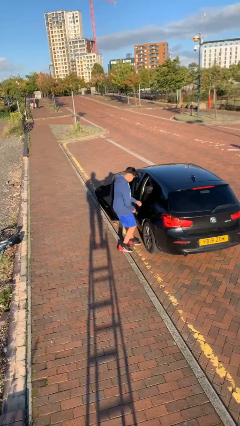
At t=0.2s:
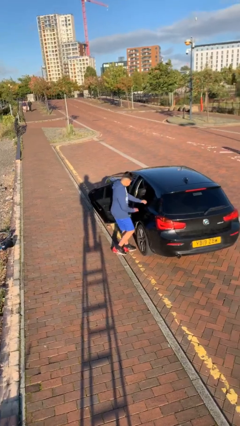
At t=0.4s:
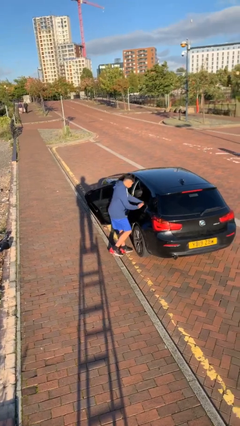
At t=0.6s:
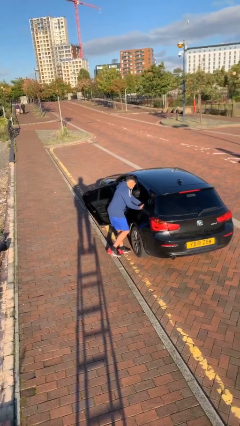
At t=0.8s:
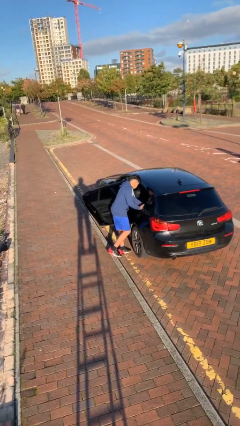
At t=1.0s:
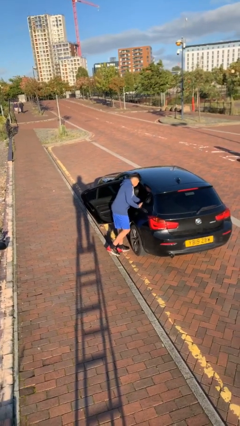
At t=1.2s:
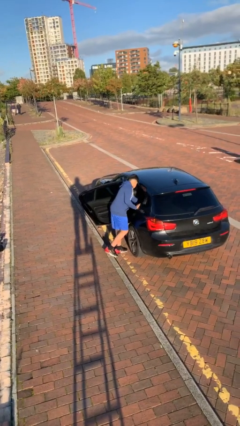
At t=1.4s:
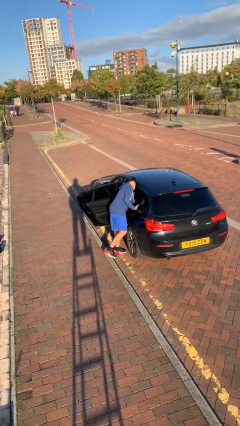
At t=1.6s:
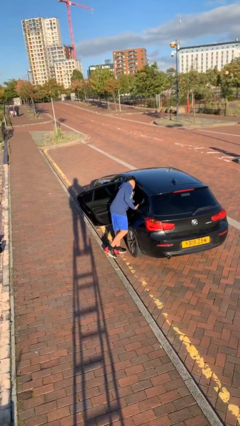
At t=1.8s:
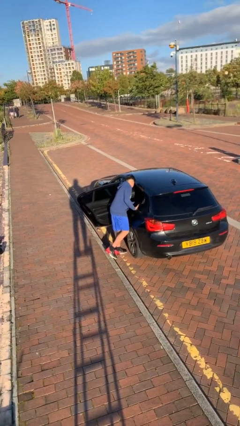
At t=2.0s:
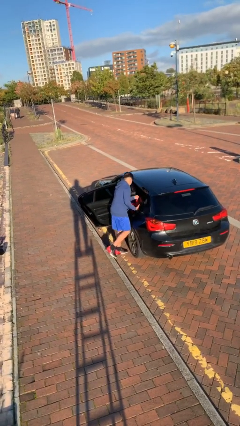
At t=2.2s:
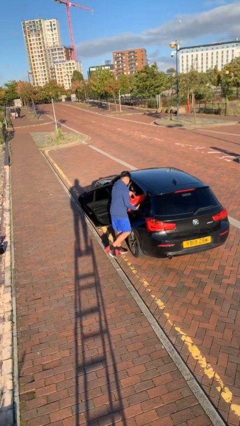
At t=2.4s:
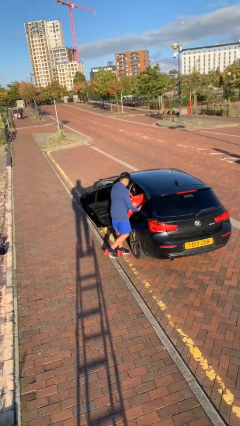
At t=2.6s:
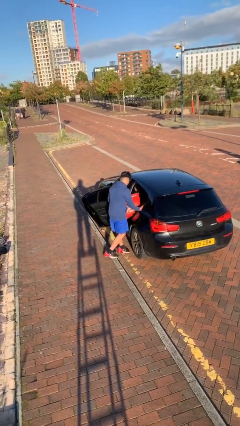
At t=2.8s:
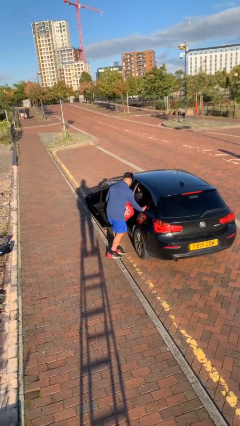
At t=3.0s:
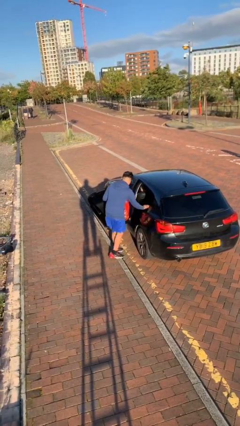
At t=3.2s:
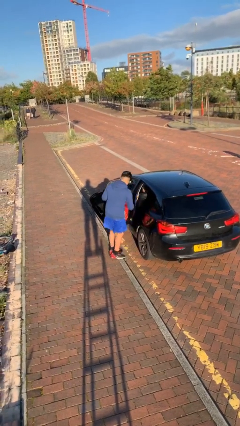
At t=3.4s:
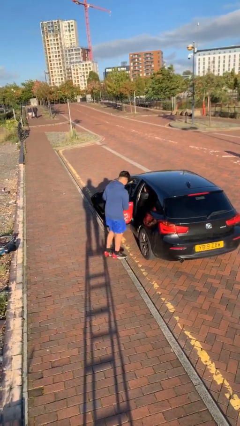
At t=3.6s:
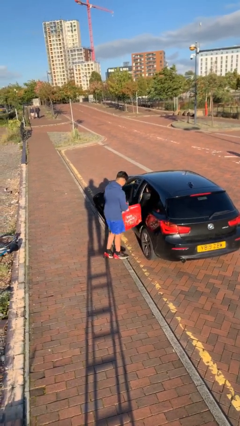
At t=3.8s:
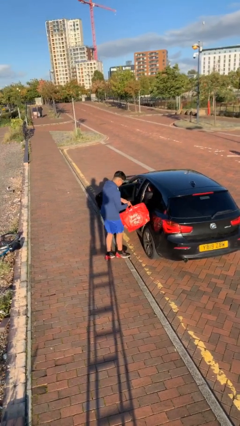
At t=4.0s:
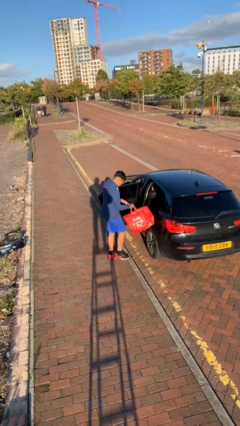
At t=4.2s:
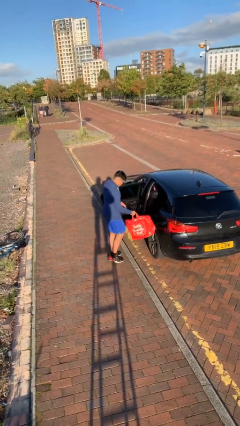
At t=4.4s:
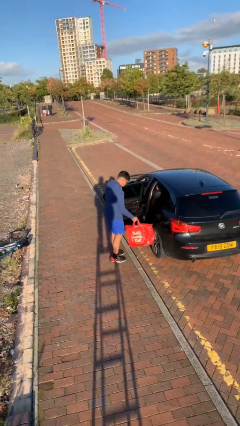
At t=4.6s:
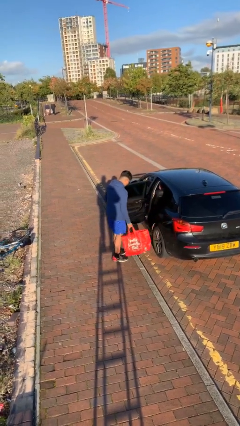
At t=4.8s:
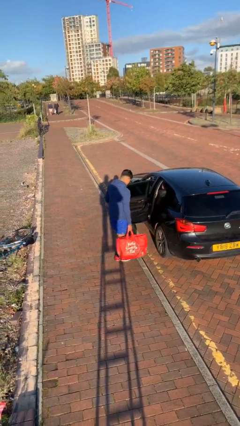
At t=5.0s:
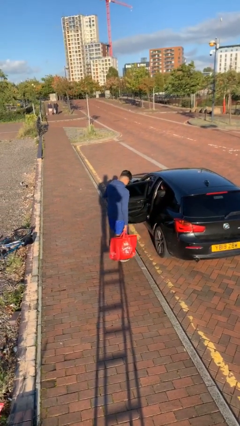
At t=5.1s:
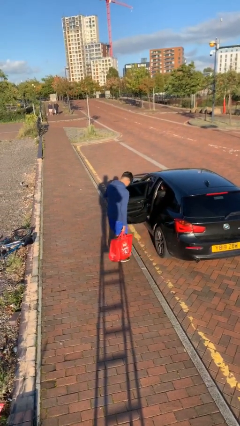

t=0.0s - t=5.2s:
person unloads car

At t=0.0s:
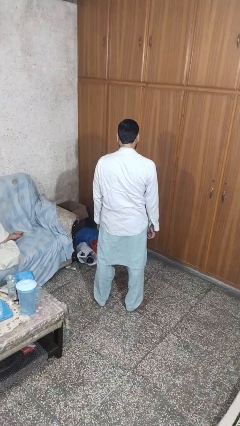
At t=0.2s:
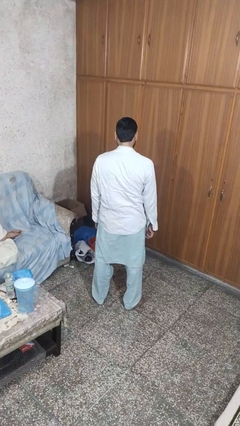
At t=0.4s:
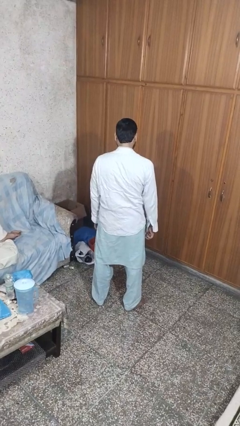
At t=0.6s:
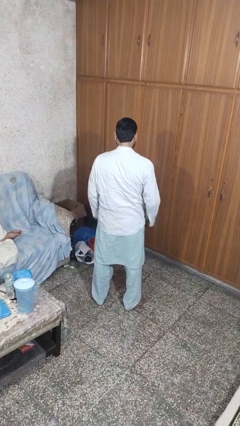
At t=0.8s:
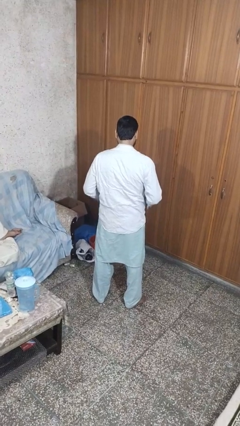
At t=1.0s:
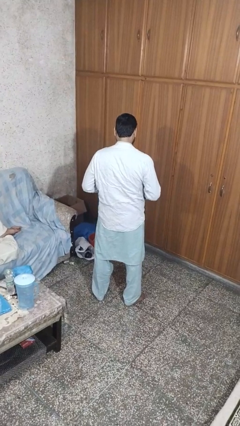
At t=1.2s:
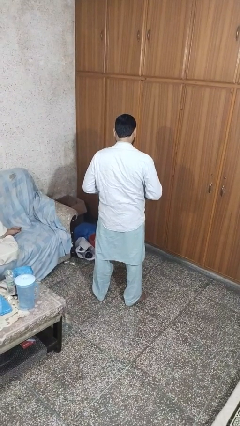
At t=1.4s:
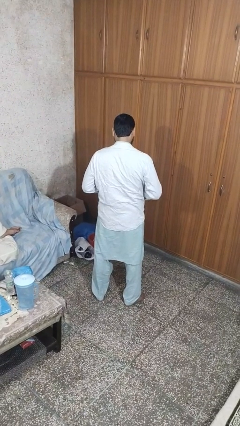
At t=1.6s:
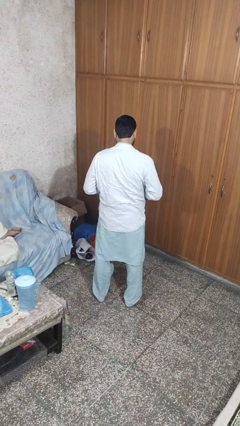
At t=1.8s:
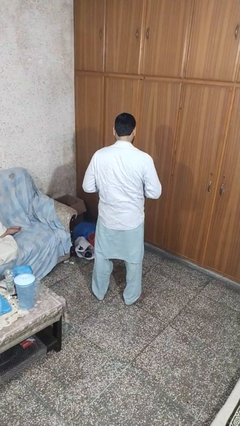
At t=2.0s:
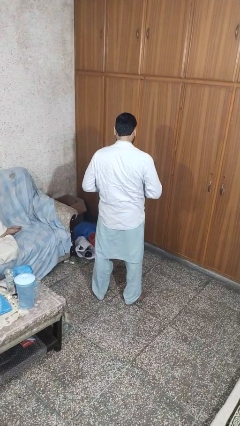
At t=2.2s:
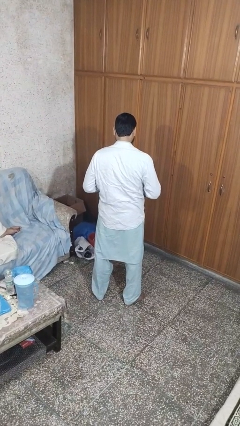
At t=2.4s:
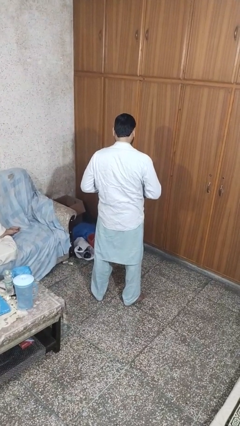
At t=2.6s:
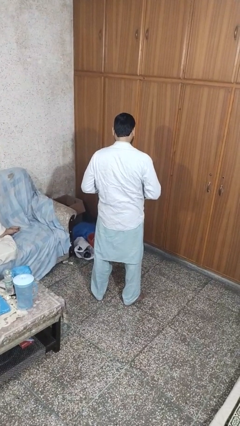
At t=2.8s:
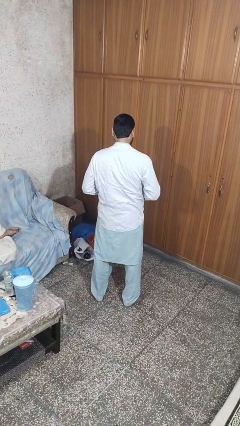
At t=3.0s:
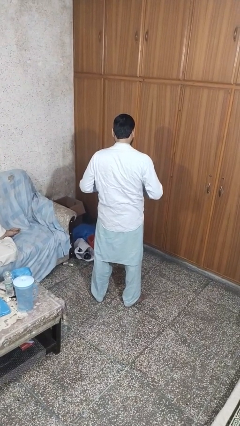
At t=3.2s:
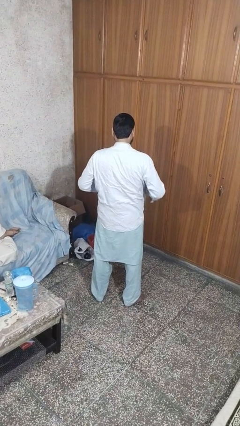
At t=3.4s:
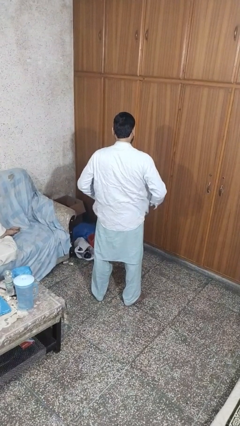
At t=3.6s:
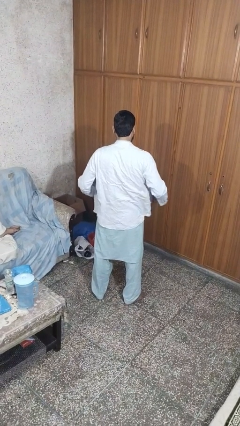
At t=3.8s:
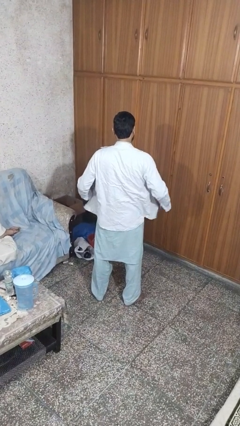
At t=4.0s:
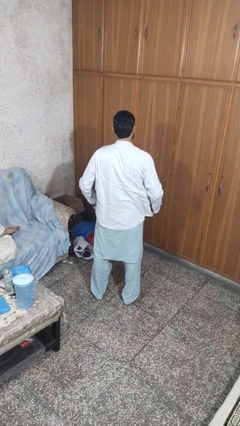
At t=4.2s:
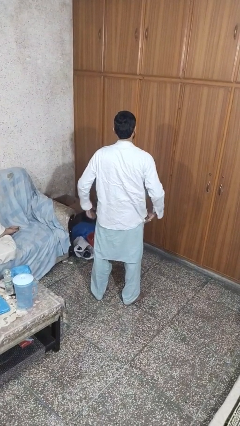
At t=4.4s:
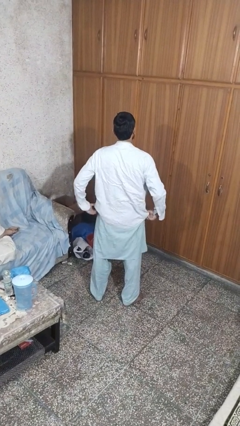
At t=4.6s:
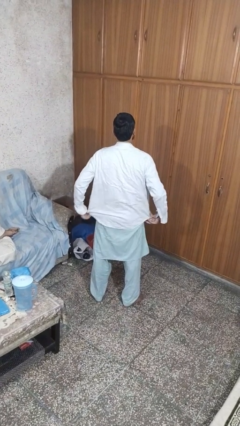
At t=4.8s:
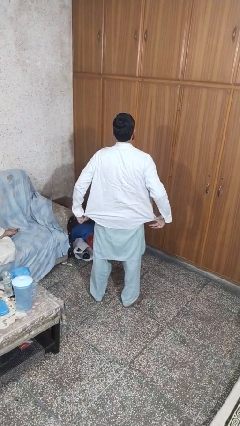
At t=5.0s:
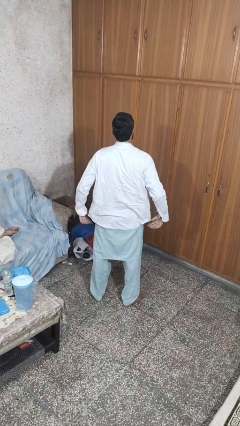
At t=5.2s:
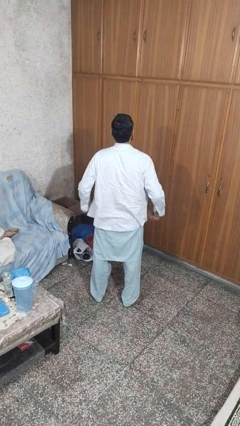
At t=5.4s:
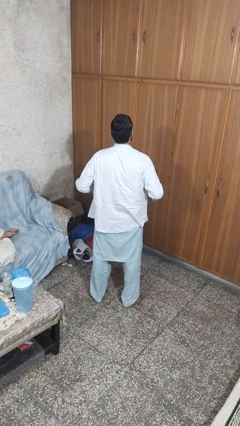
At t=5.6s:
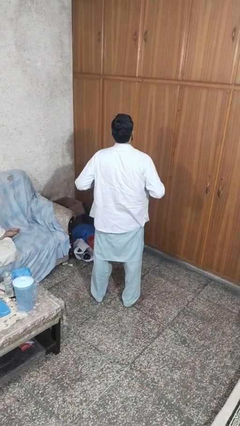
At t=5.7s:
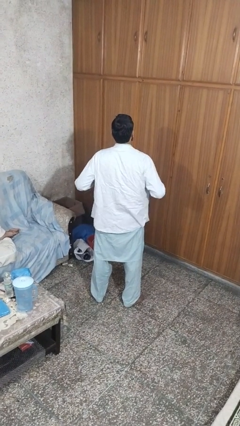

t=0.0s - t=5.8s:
person unbuttons shirt

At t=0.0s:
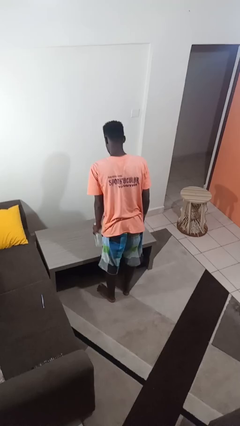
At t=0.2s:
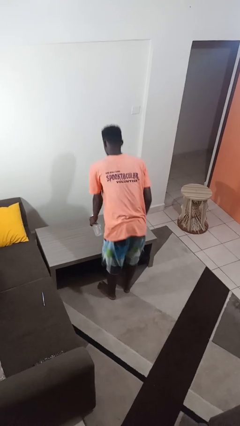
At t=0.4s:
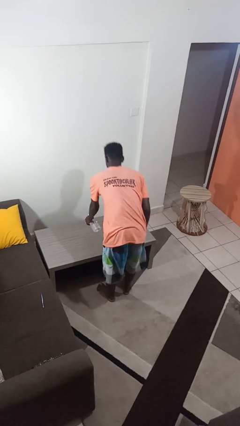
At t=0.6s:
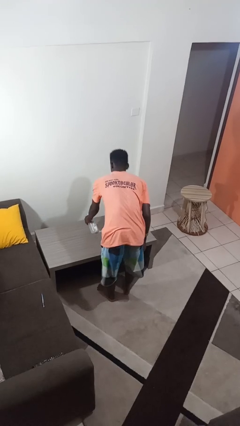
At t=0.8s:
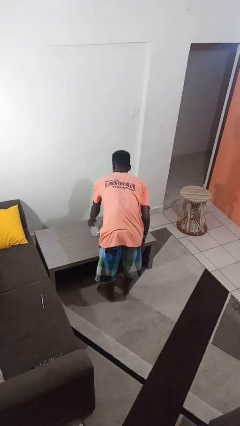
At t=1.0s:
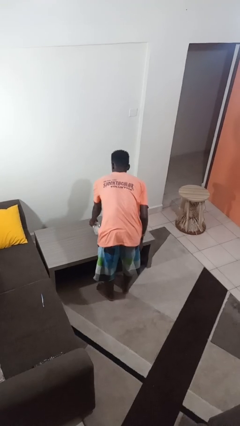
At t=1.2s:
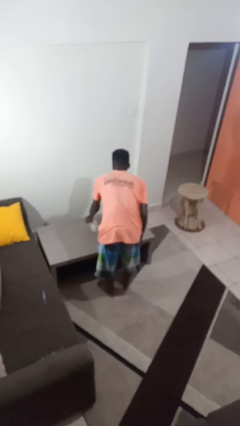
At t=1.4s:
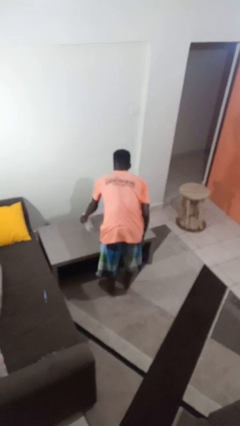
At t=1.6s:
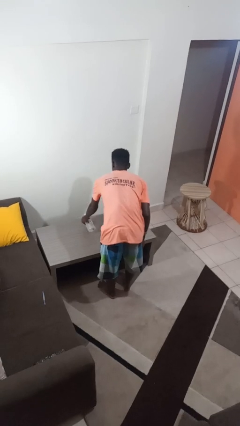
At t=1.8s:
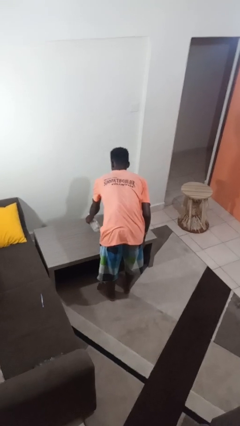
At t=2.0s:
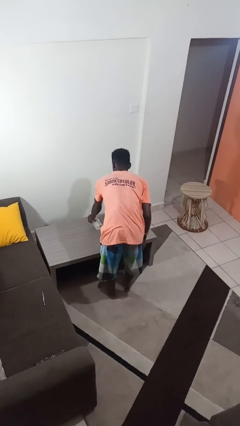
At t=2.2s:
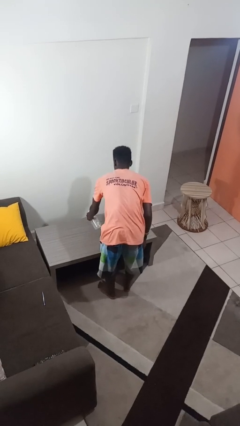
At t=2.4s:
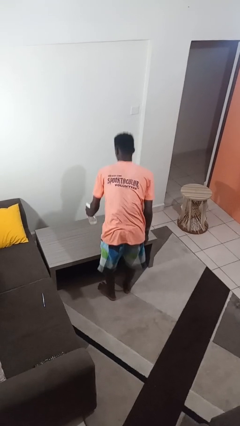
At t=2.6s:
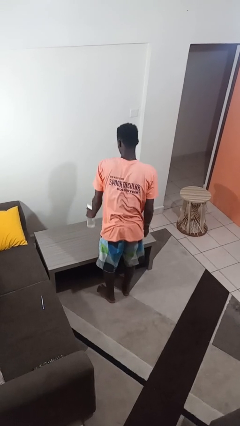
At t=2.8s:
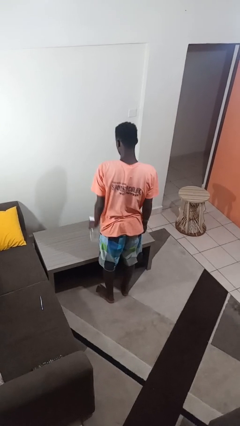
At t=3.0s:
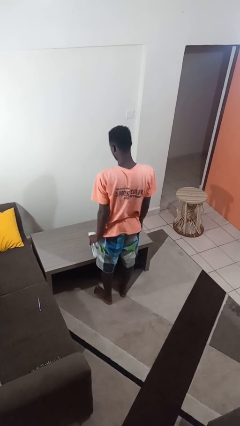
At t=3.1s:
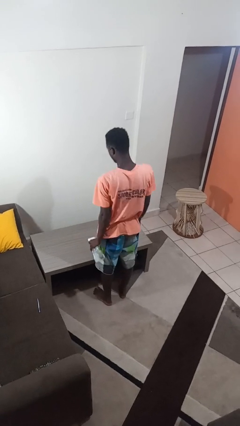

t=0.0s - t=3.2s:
person sprays from bottle

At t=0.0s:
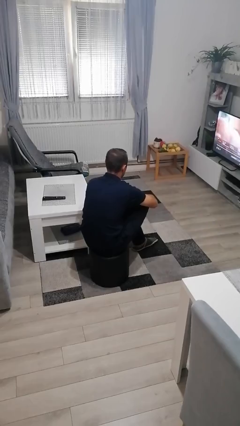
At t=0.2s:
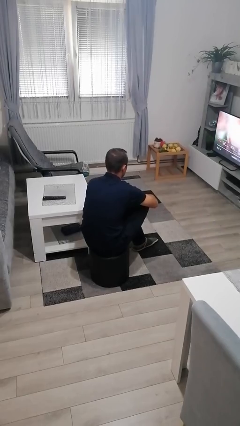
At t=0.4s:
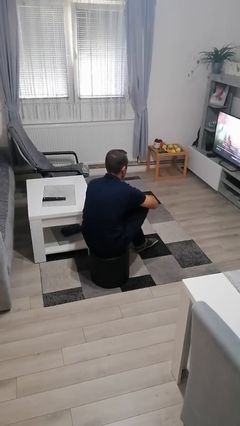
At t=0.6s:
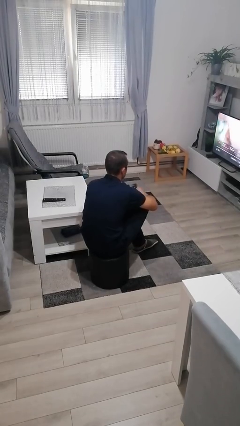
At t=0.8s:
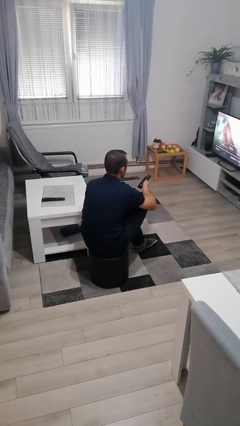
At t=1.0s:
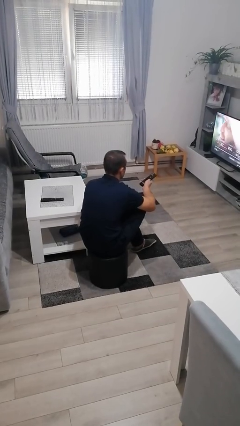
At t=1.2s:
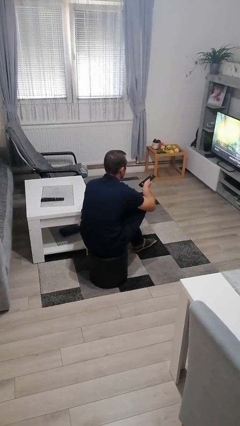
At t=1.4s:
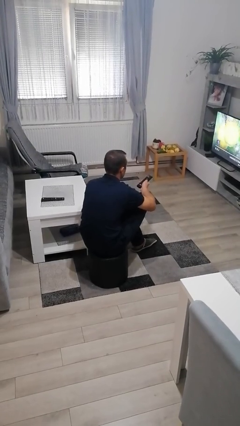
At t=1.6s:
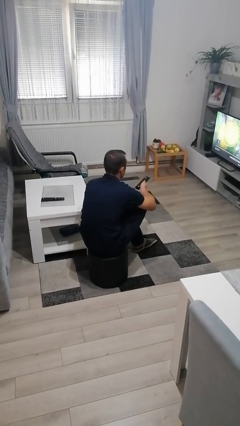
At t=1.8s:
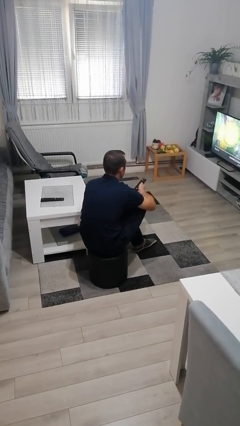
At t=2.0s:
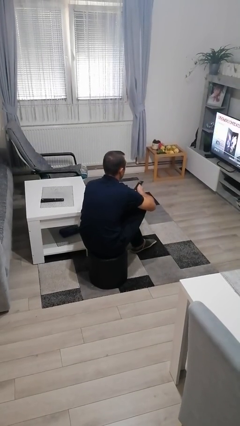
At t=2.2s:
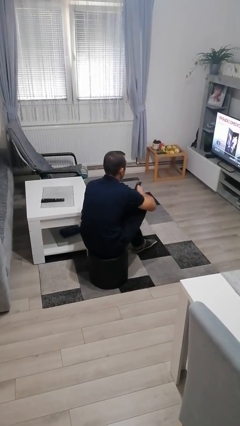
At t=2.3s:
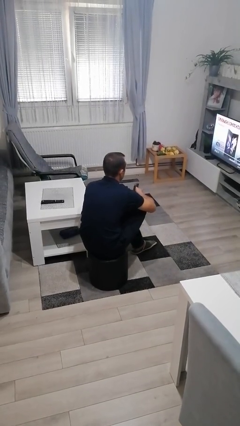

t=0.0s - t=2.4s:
person uses television remote

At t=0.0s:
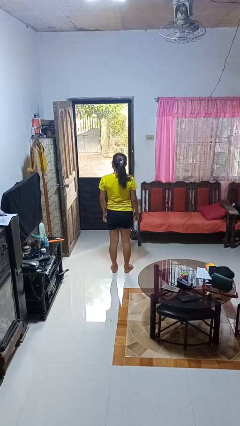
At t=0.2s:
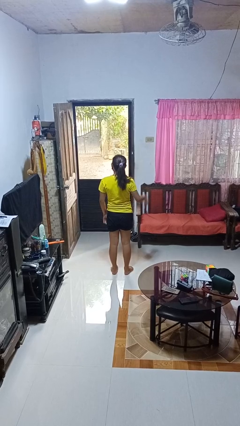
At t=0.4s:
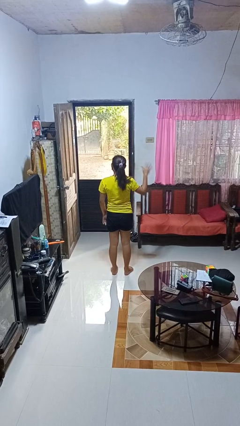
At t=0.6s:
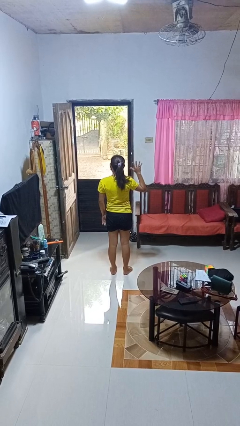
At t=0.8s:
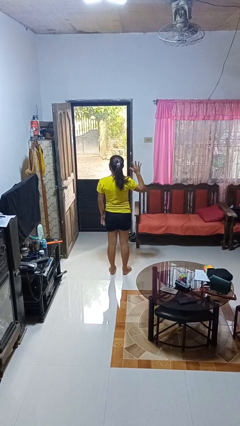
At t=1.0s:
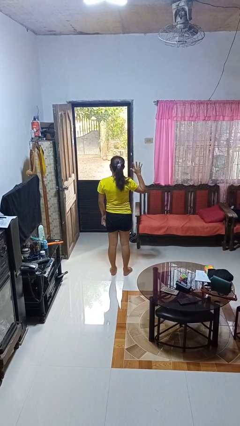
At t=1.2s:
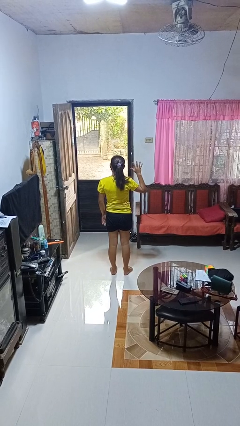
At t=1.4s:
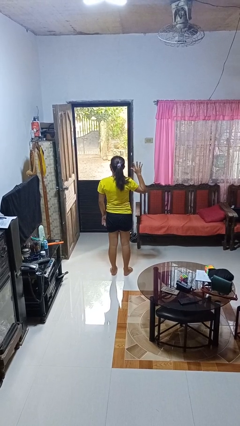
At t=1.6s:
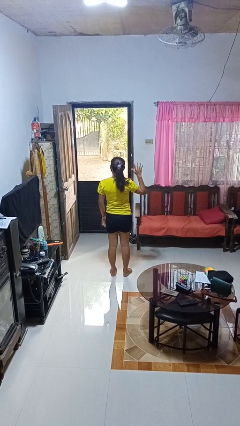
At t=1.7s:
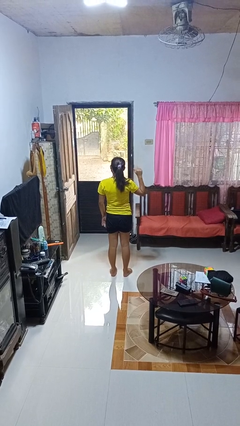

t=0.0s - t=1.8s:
person gestures number five
